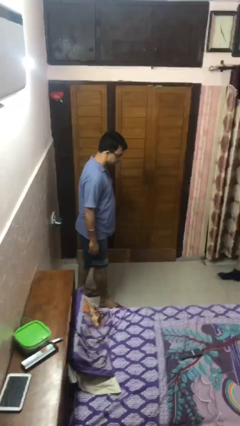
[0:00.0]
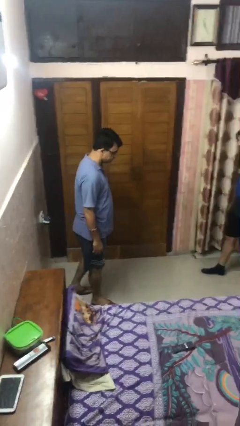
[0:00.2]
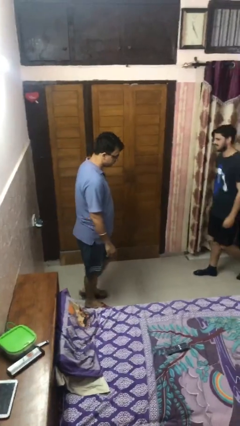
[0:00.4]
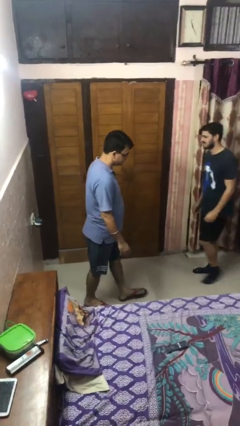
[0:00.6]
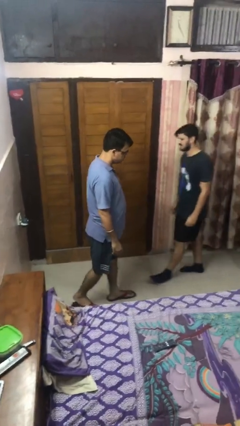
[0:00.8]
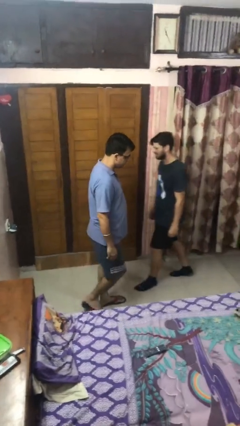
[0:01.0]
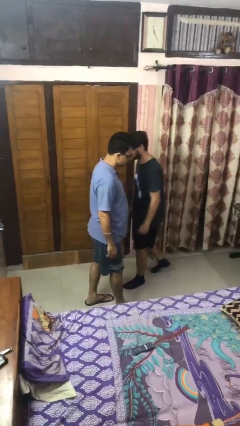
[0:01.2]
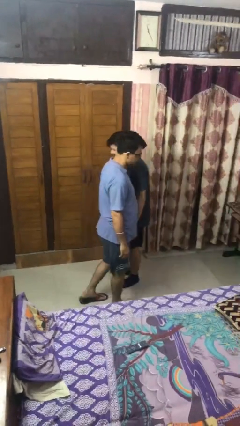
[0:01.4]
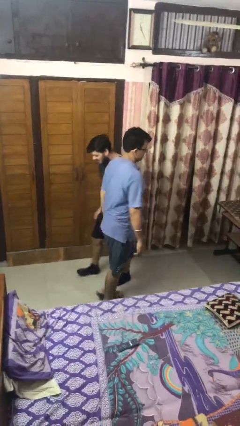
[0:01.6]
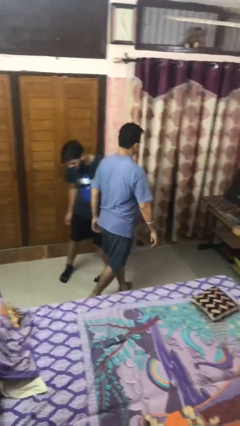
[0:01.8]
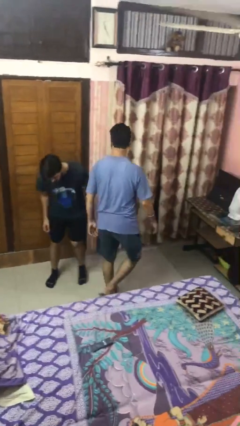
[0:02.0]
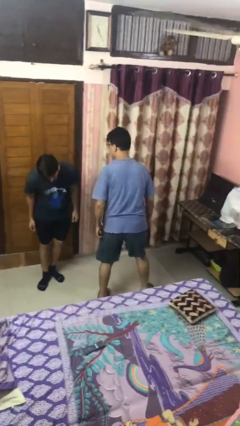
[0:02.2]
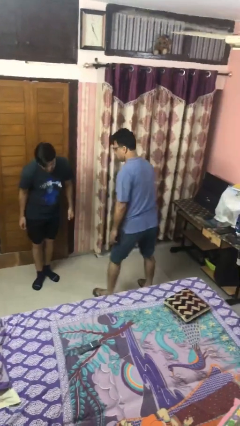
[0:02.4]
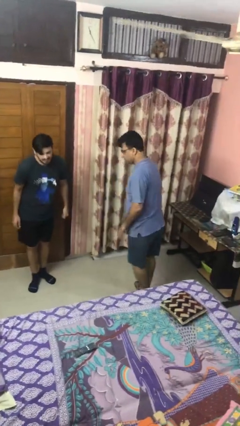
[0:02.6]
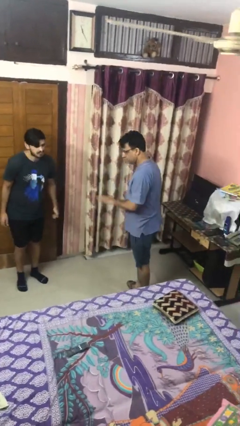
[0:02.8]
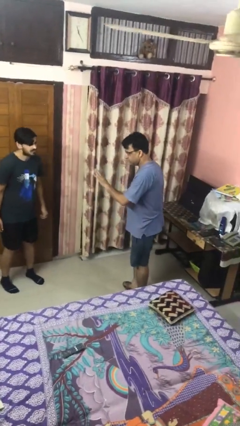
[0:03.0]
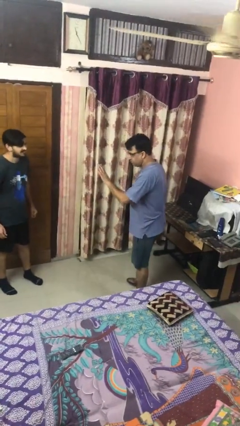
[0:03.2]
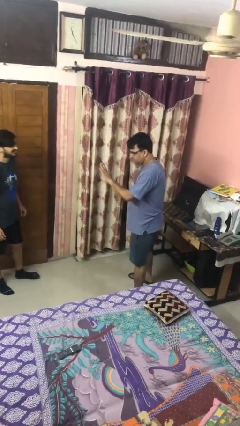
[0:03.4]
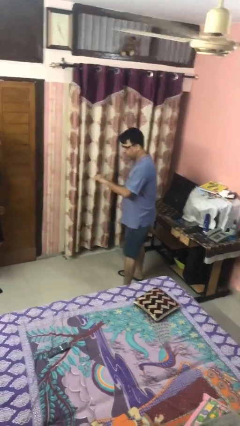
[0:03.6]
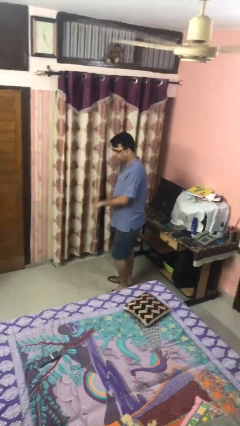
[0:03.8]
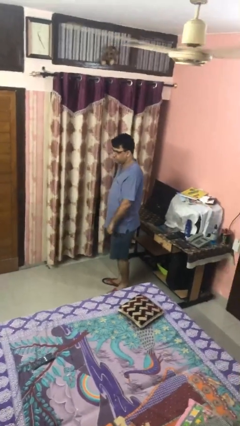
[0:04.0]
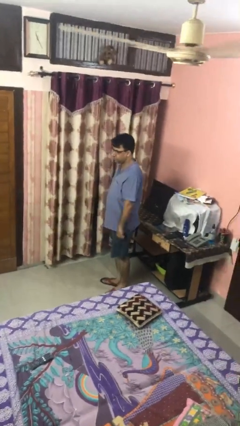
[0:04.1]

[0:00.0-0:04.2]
person bumps into person

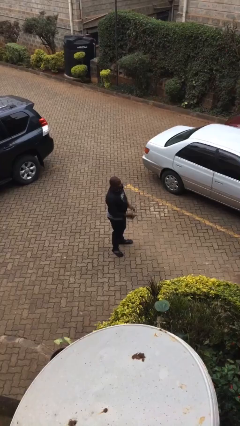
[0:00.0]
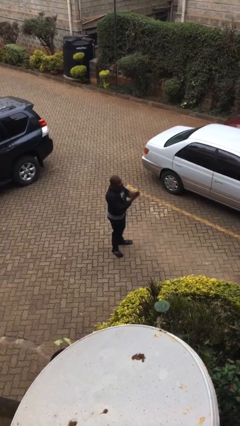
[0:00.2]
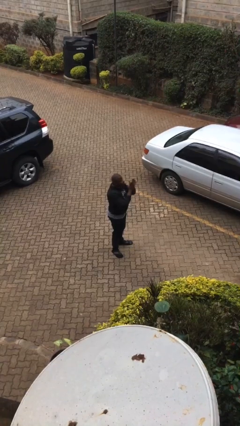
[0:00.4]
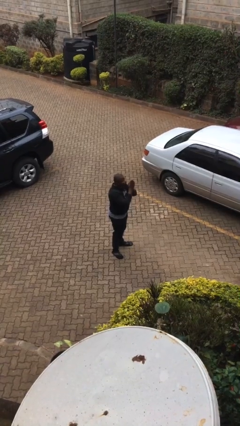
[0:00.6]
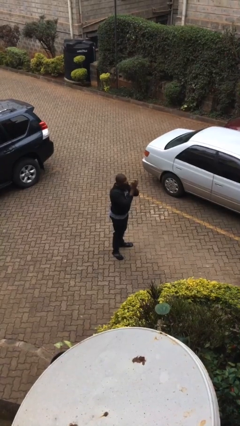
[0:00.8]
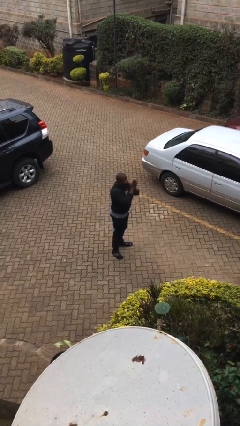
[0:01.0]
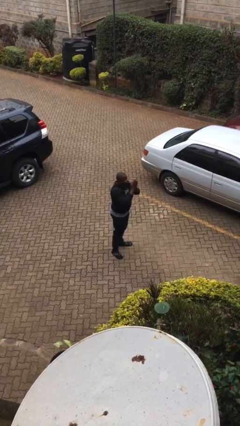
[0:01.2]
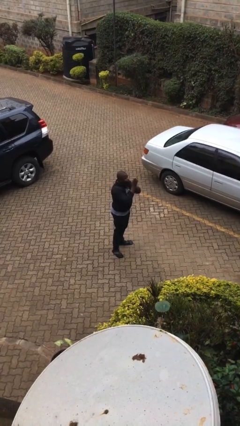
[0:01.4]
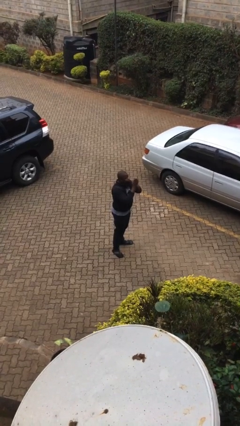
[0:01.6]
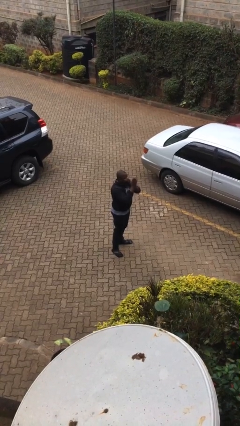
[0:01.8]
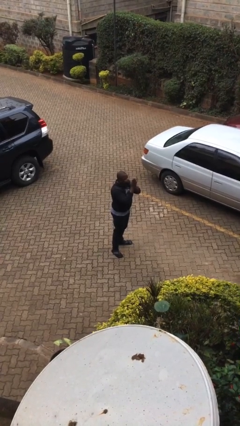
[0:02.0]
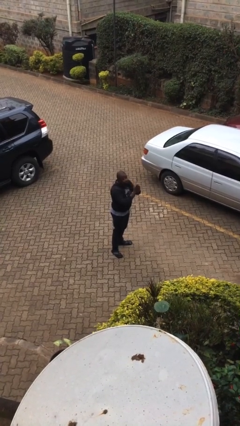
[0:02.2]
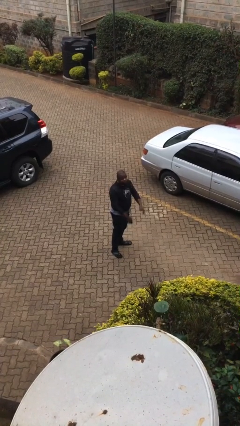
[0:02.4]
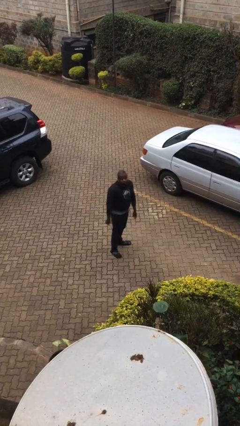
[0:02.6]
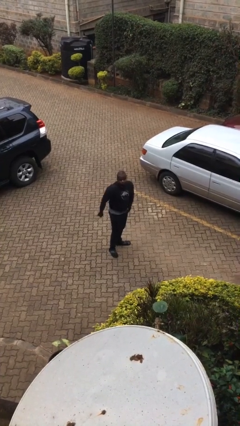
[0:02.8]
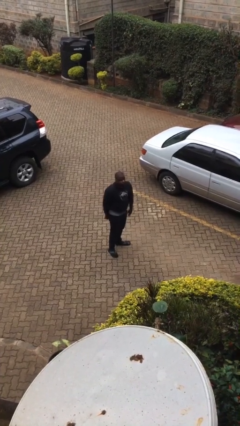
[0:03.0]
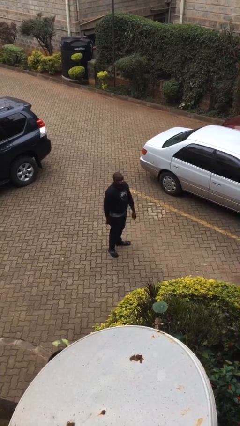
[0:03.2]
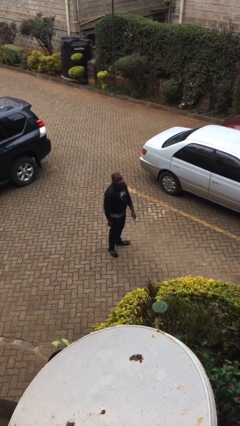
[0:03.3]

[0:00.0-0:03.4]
person blows into hands

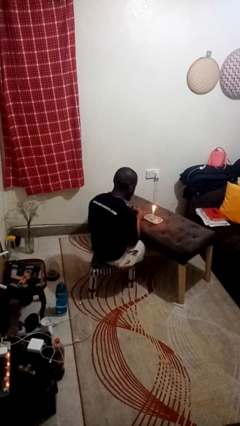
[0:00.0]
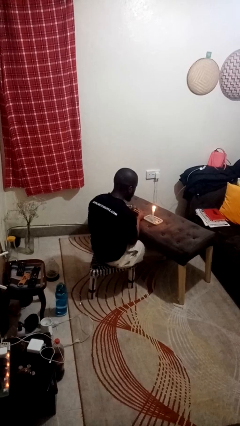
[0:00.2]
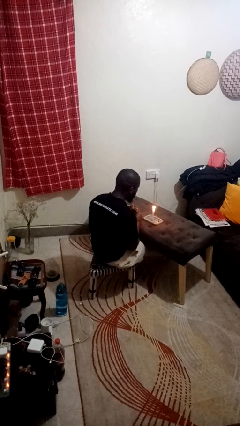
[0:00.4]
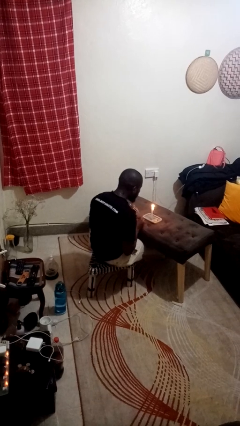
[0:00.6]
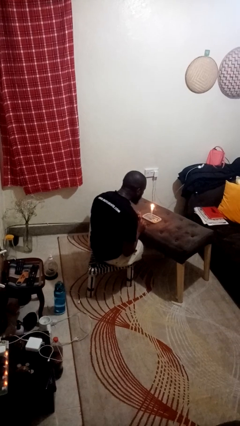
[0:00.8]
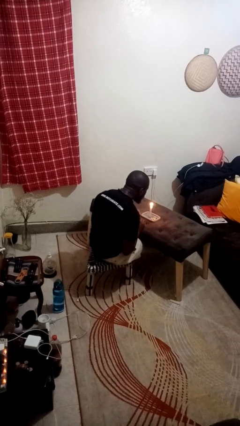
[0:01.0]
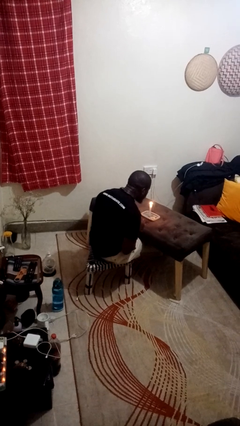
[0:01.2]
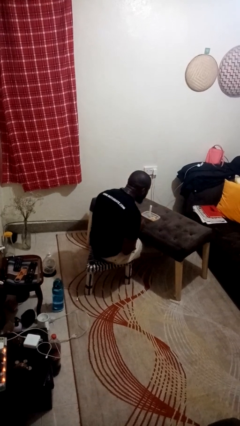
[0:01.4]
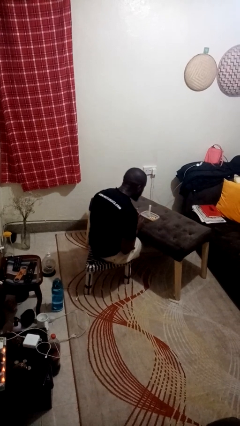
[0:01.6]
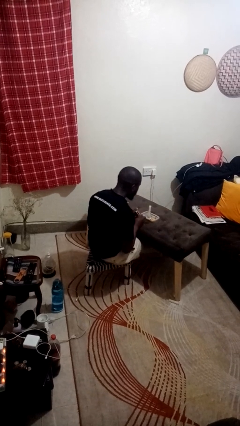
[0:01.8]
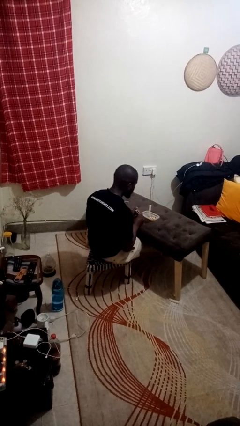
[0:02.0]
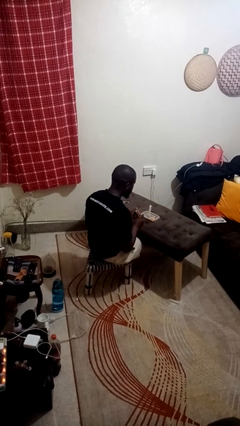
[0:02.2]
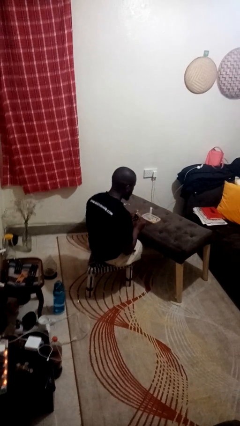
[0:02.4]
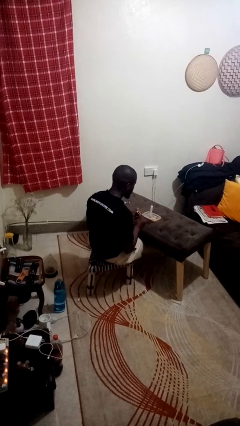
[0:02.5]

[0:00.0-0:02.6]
person extinguishes candle

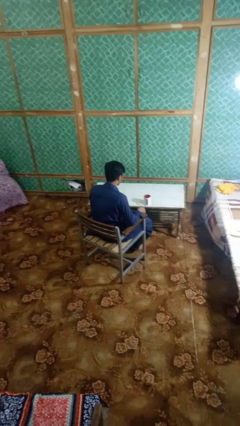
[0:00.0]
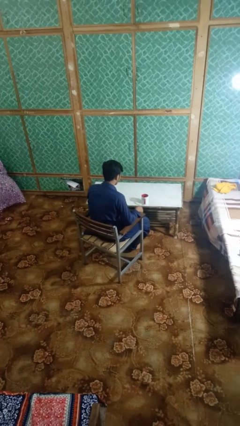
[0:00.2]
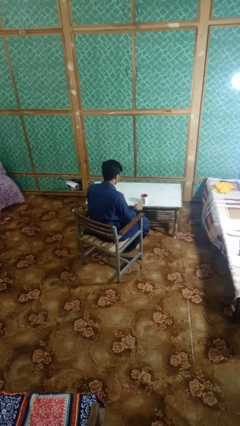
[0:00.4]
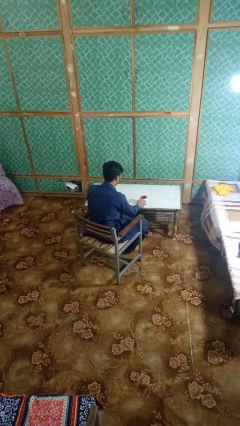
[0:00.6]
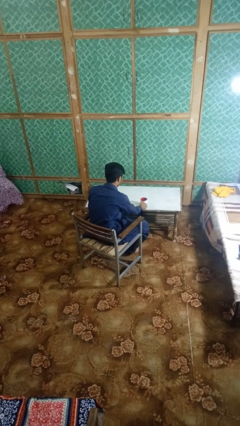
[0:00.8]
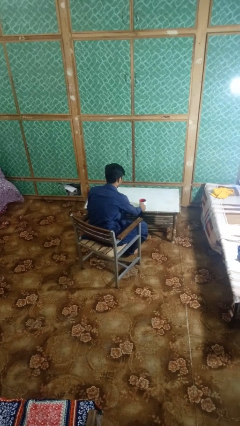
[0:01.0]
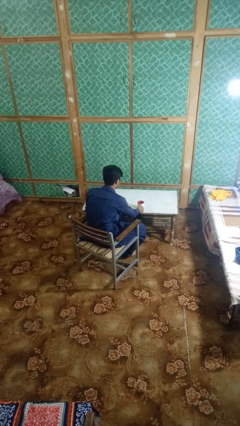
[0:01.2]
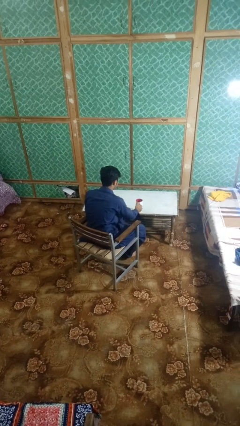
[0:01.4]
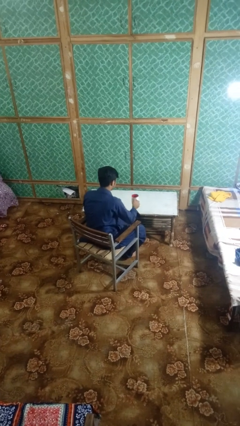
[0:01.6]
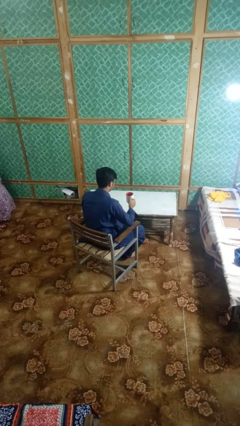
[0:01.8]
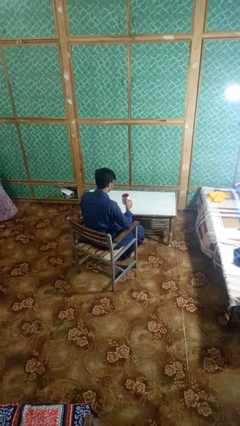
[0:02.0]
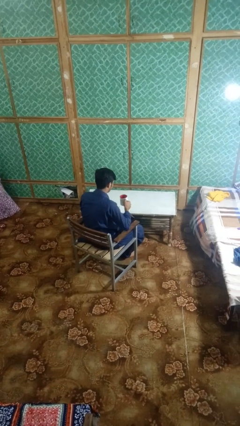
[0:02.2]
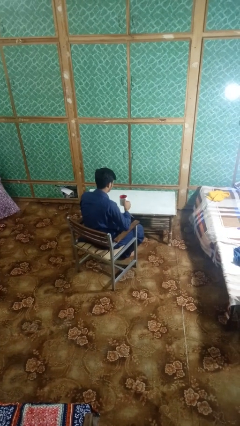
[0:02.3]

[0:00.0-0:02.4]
person picks up object from table

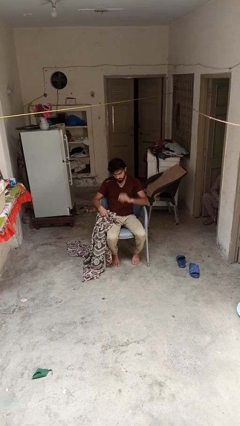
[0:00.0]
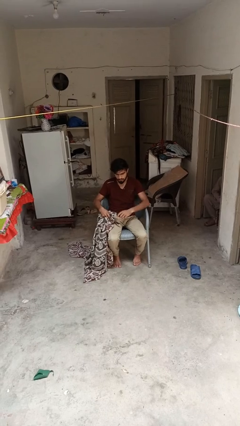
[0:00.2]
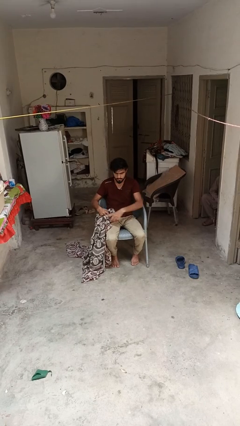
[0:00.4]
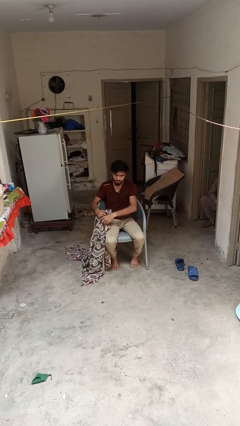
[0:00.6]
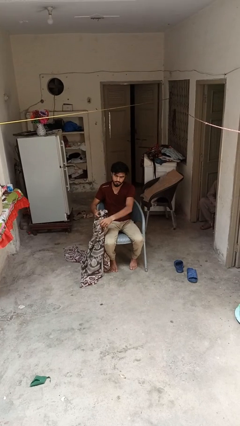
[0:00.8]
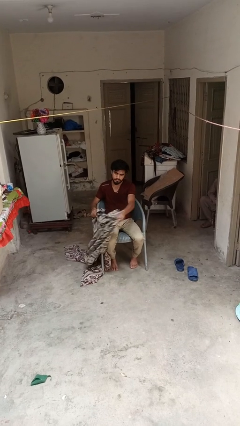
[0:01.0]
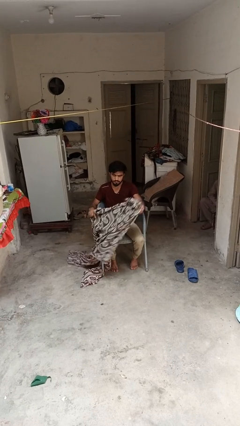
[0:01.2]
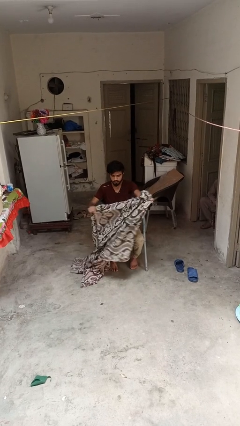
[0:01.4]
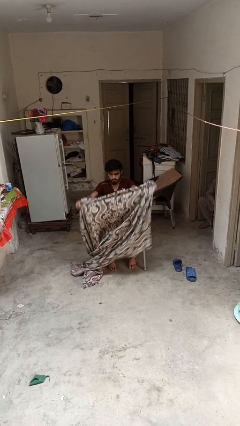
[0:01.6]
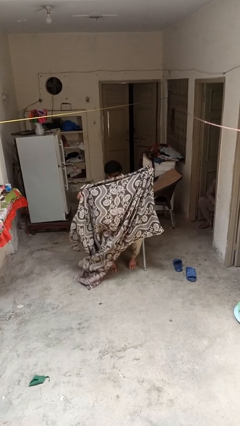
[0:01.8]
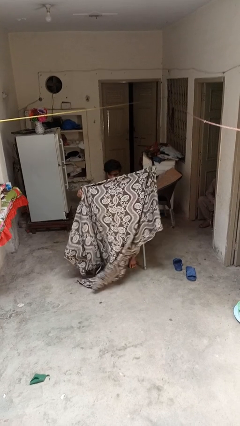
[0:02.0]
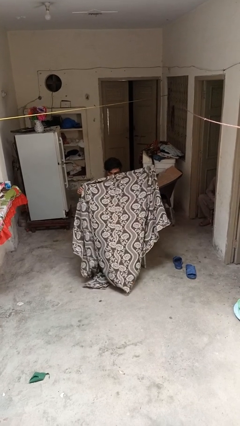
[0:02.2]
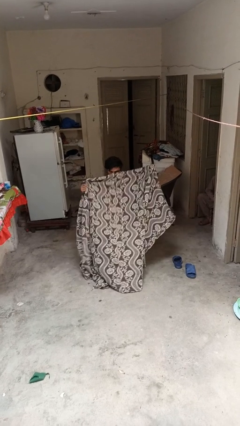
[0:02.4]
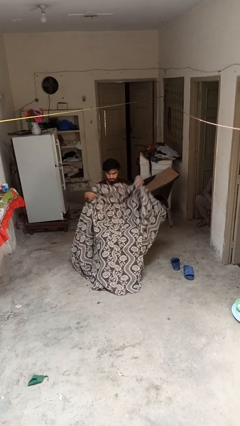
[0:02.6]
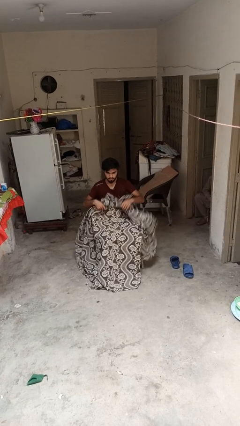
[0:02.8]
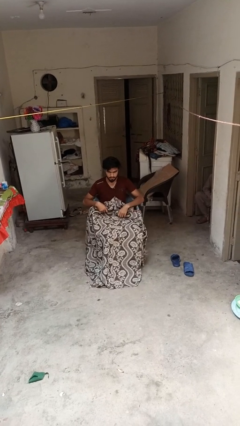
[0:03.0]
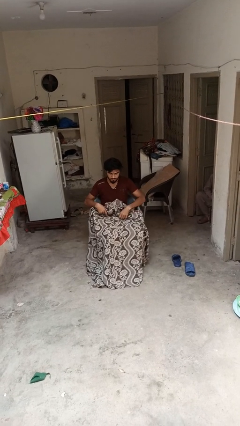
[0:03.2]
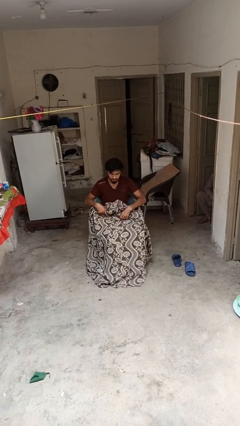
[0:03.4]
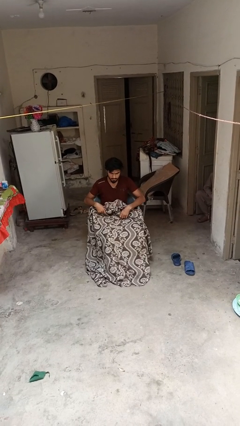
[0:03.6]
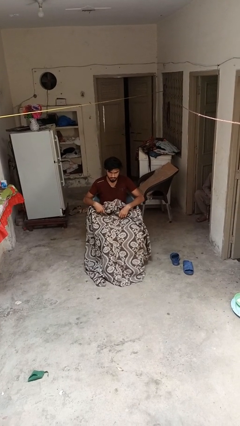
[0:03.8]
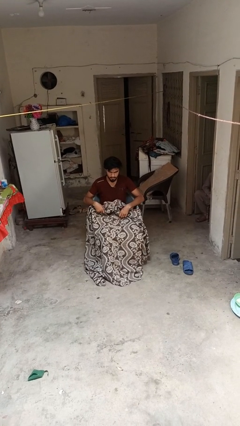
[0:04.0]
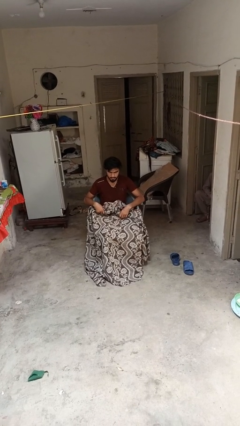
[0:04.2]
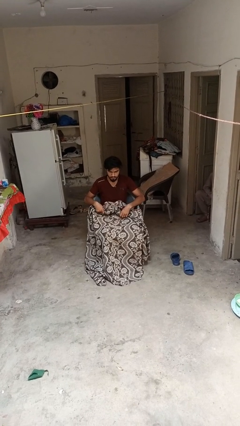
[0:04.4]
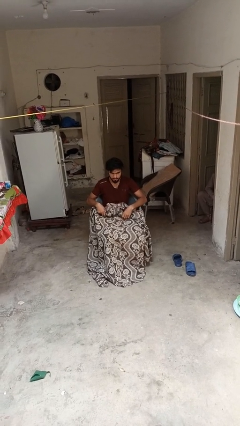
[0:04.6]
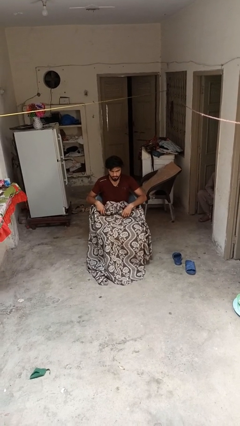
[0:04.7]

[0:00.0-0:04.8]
person covers with blanket
